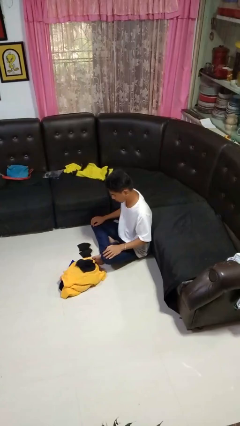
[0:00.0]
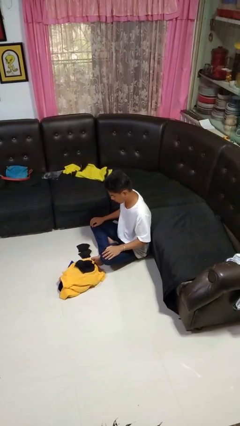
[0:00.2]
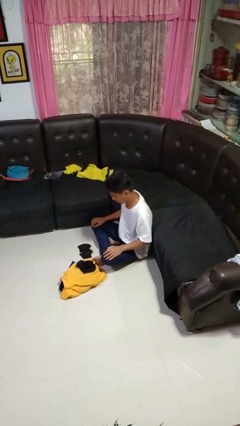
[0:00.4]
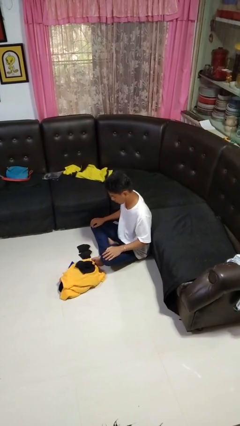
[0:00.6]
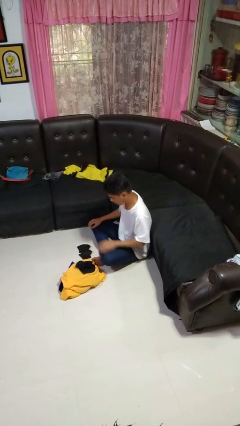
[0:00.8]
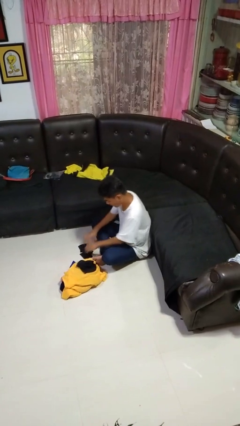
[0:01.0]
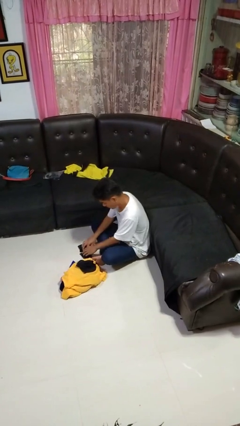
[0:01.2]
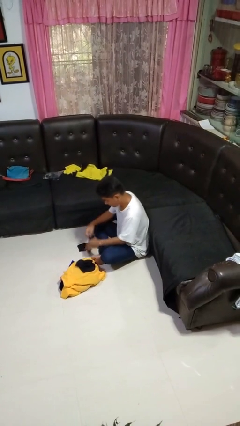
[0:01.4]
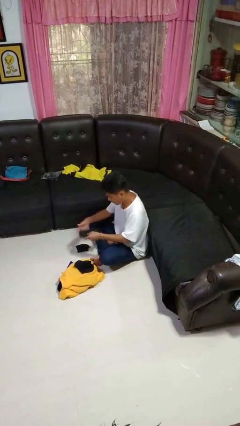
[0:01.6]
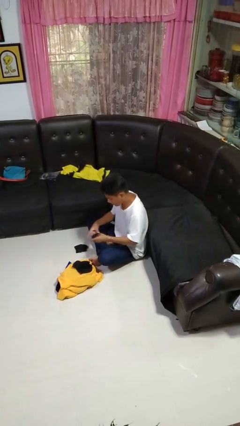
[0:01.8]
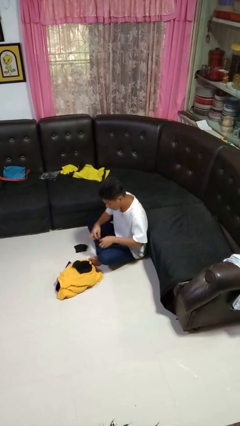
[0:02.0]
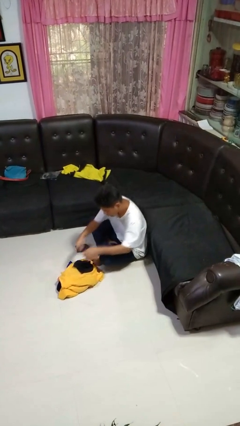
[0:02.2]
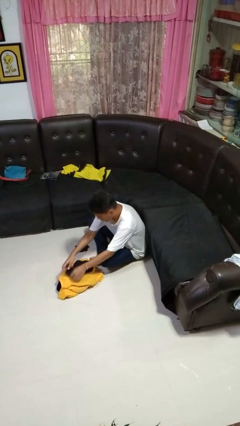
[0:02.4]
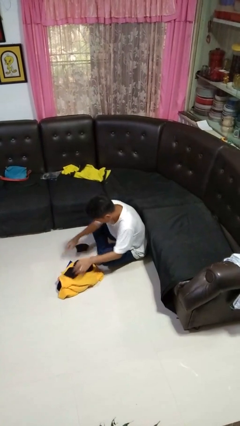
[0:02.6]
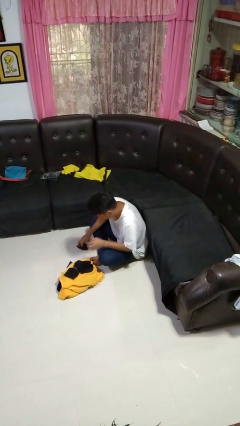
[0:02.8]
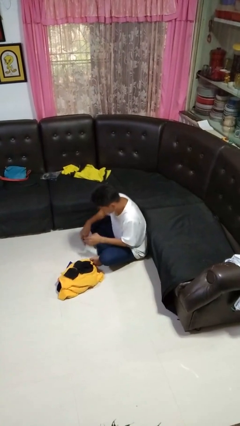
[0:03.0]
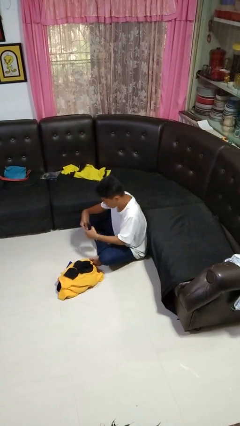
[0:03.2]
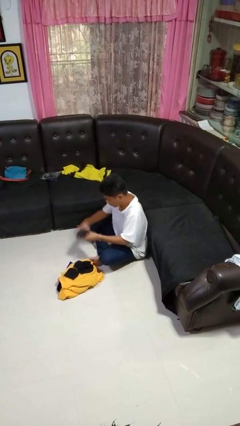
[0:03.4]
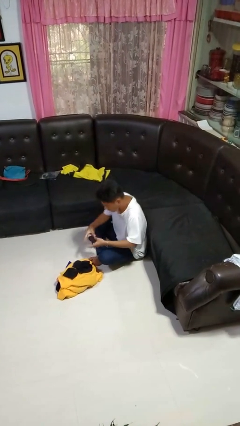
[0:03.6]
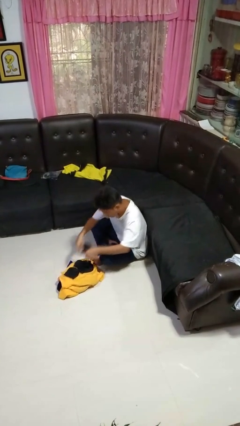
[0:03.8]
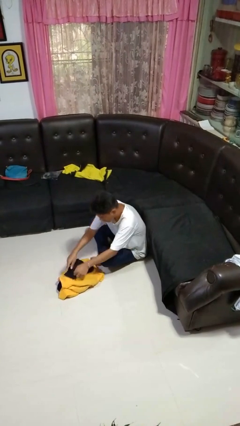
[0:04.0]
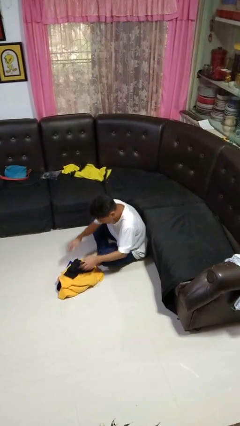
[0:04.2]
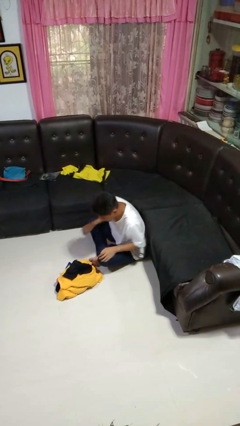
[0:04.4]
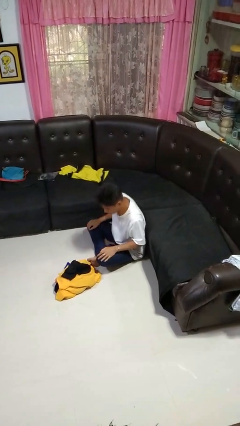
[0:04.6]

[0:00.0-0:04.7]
person folds socks

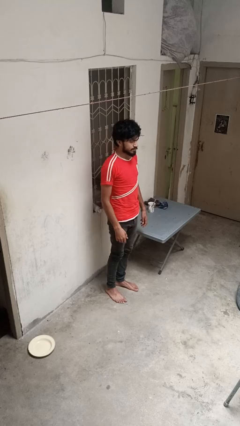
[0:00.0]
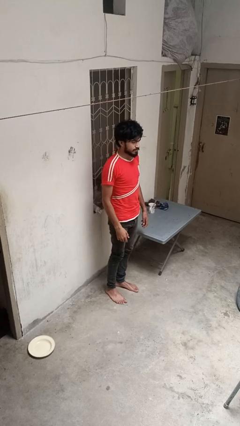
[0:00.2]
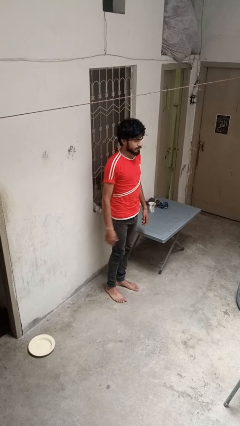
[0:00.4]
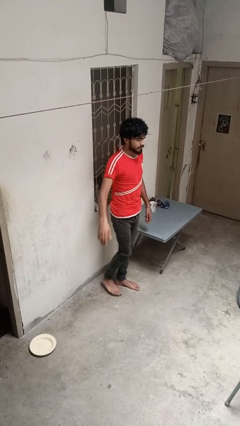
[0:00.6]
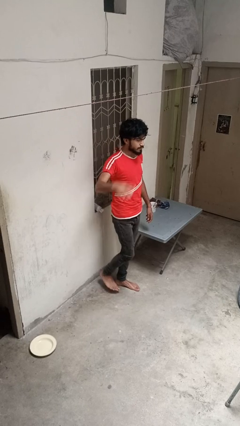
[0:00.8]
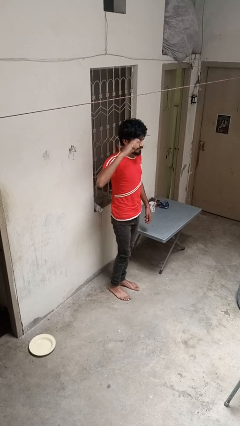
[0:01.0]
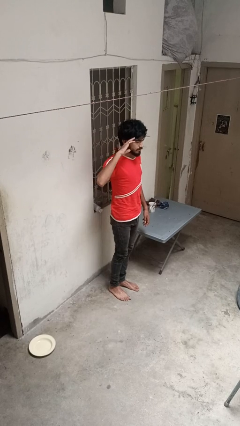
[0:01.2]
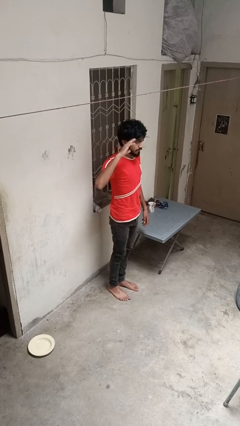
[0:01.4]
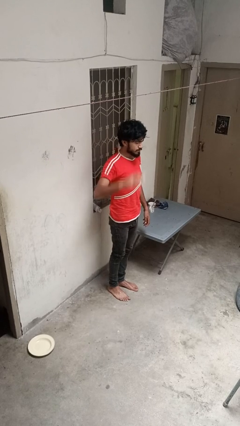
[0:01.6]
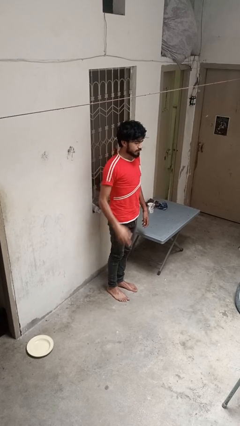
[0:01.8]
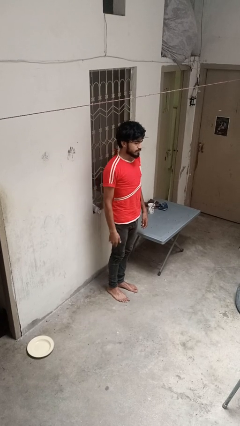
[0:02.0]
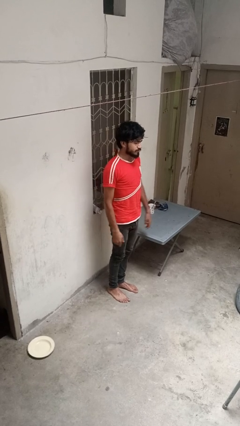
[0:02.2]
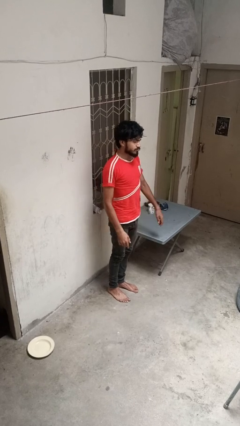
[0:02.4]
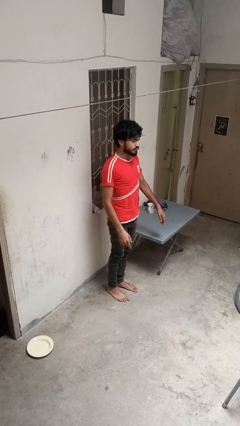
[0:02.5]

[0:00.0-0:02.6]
person salutes

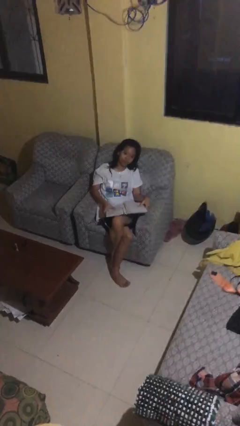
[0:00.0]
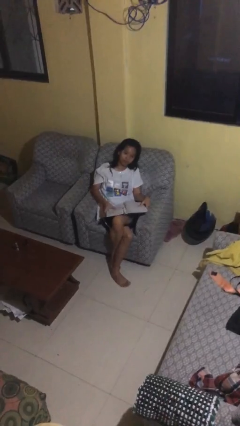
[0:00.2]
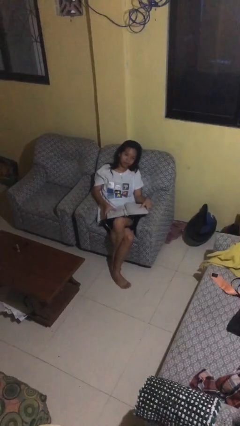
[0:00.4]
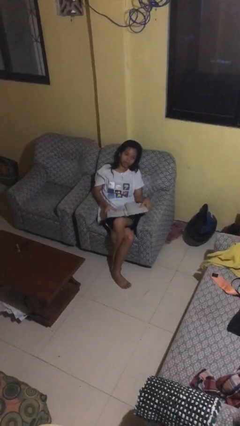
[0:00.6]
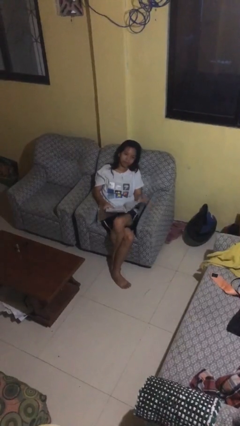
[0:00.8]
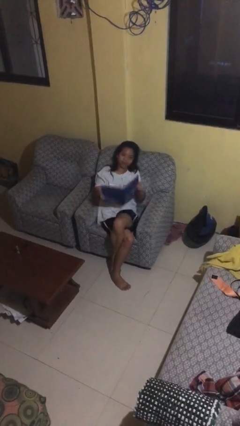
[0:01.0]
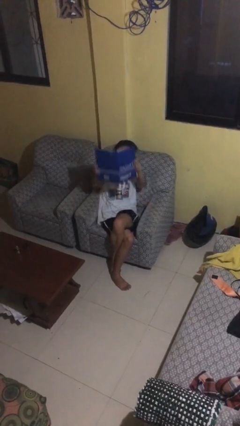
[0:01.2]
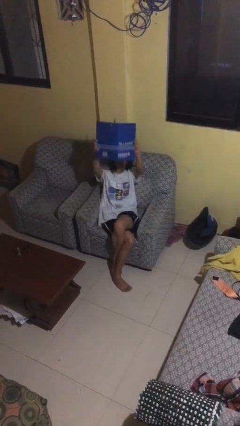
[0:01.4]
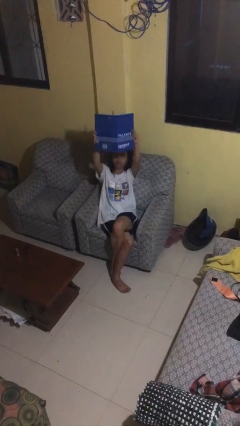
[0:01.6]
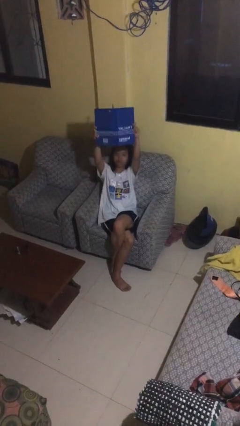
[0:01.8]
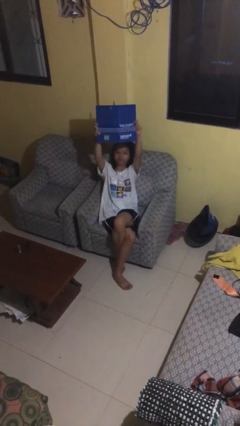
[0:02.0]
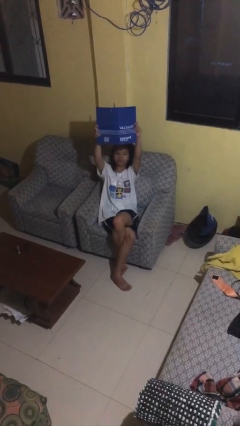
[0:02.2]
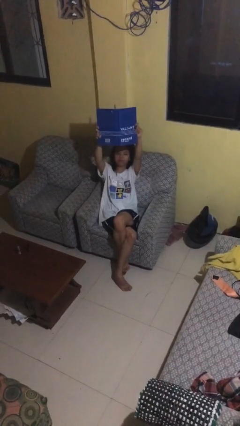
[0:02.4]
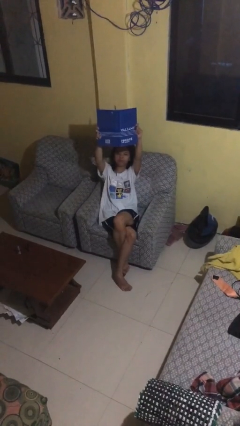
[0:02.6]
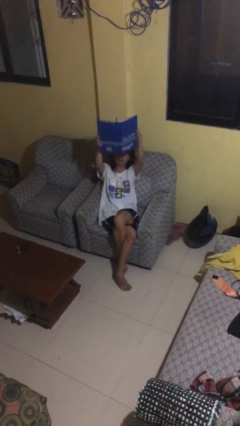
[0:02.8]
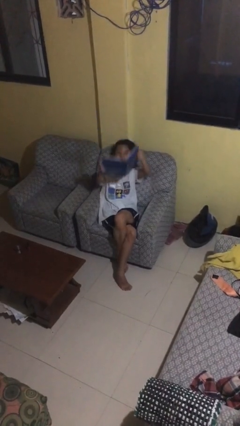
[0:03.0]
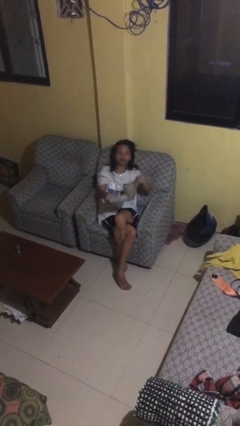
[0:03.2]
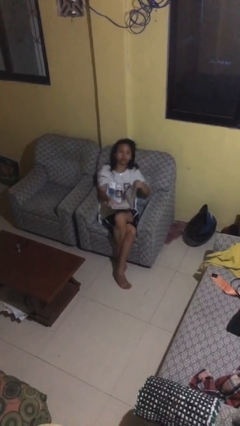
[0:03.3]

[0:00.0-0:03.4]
person holds object above head

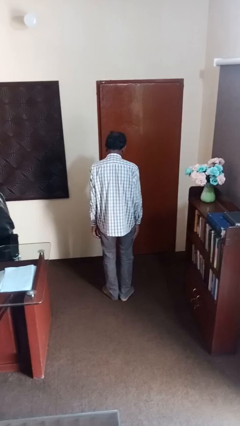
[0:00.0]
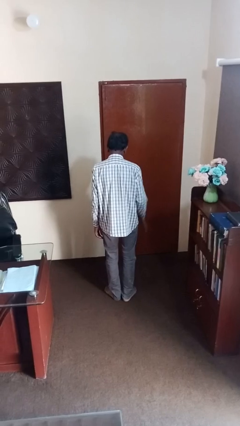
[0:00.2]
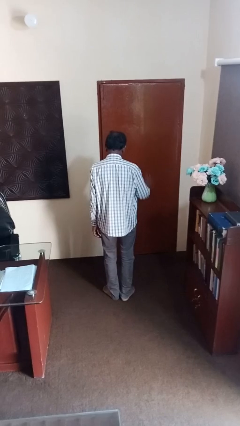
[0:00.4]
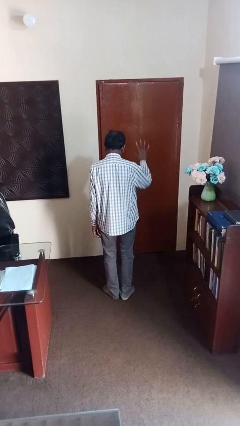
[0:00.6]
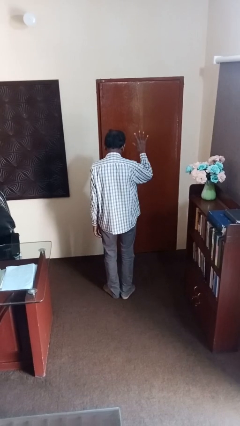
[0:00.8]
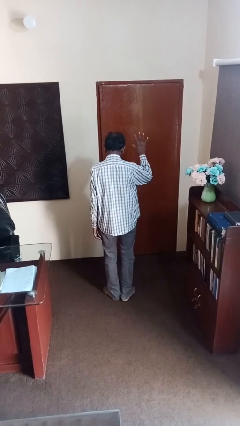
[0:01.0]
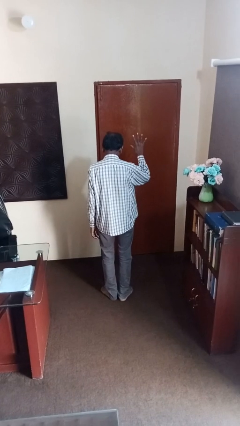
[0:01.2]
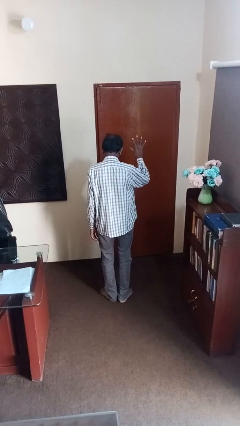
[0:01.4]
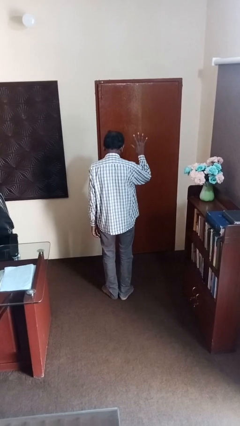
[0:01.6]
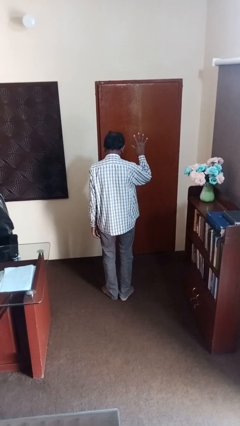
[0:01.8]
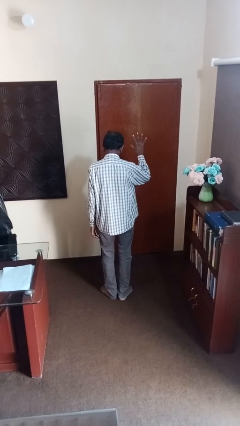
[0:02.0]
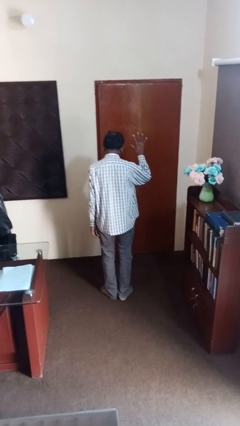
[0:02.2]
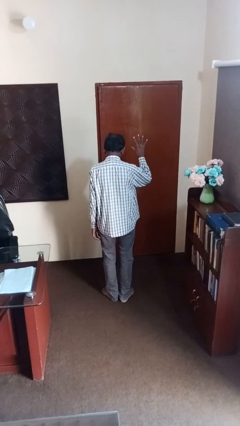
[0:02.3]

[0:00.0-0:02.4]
person gestures number five

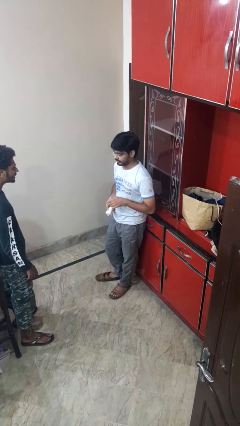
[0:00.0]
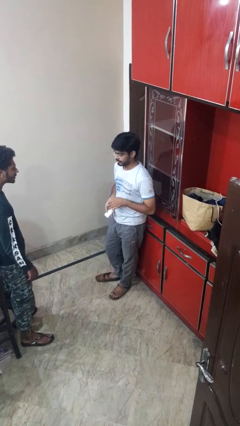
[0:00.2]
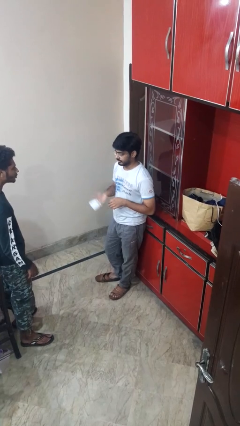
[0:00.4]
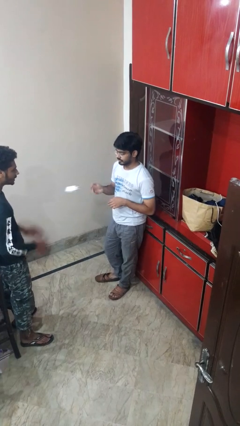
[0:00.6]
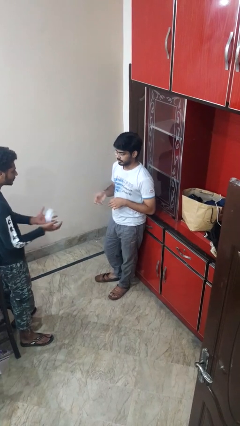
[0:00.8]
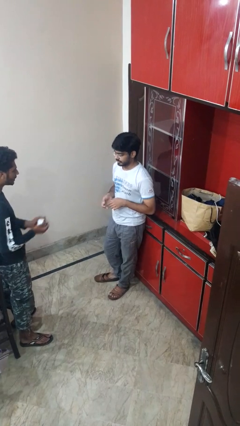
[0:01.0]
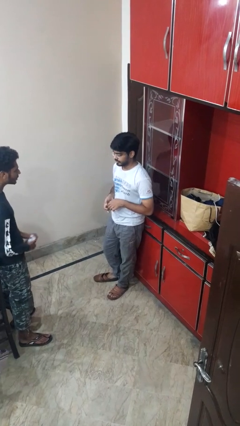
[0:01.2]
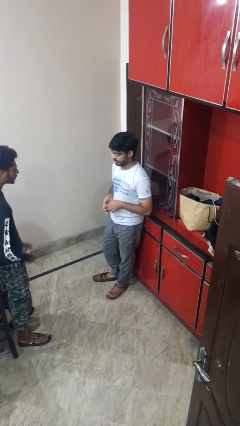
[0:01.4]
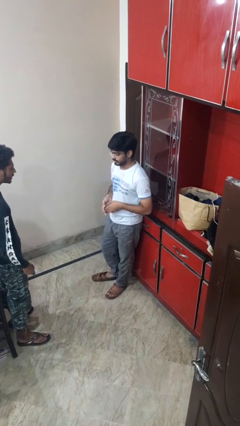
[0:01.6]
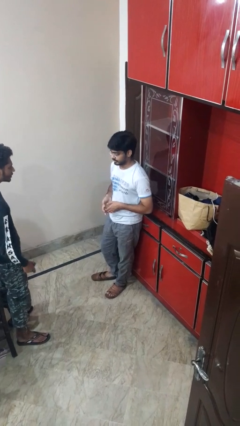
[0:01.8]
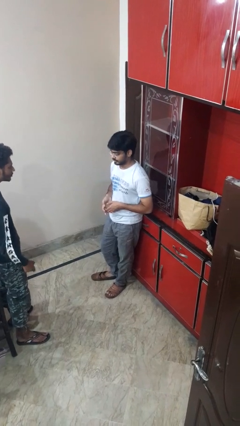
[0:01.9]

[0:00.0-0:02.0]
person throws object to person

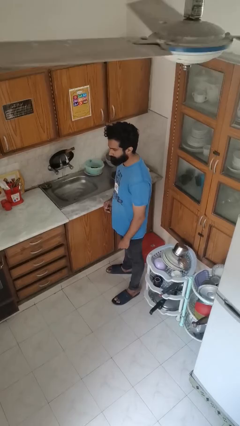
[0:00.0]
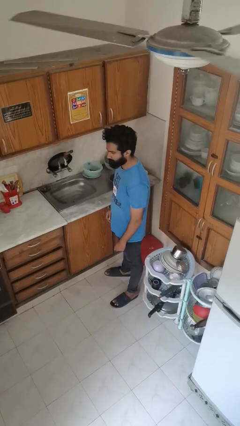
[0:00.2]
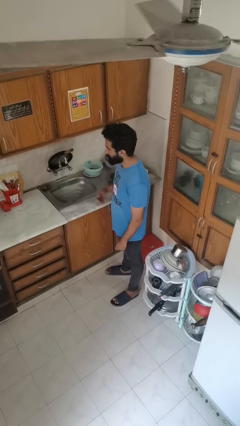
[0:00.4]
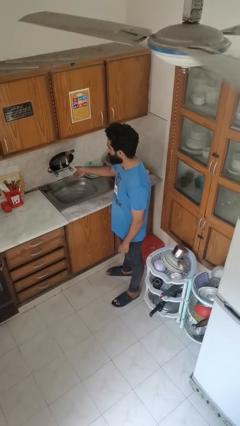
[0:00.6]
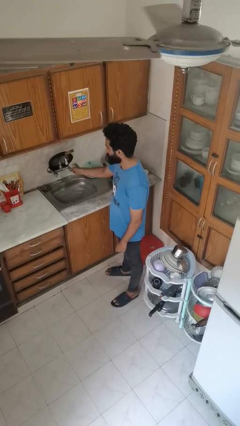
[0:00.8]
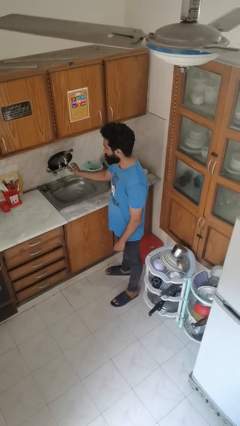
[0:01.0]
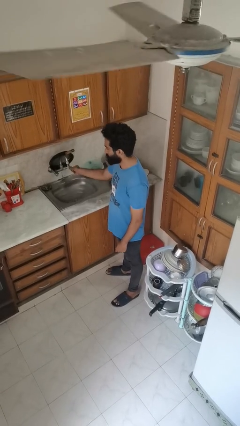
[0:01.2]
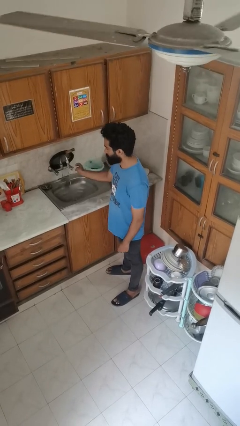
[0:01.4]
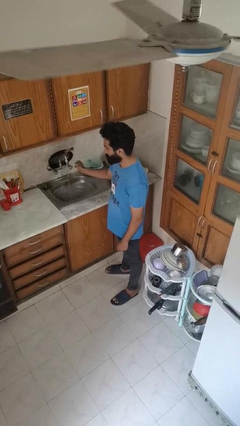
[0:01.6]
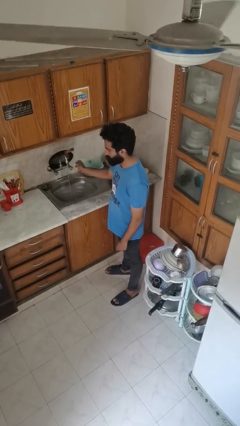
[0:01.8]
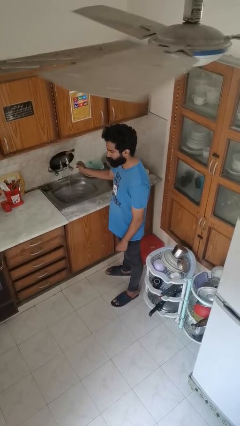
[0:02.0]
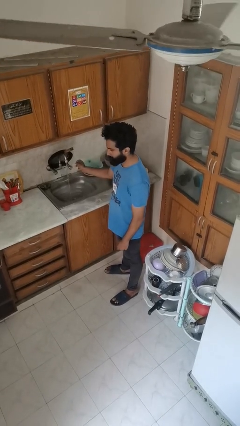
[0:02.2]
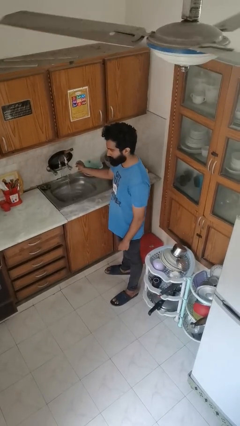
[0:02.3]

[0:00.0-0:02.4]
person turns on faucet
